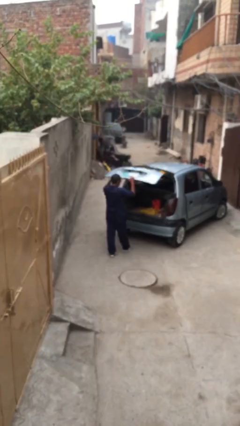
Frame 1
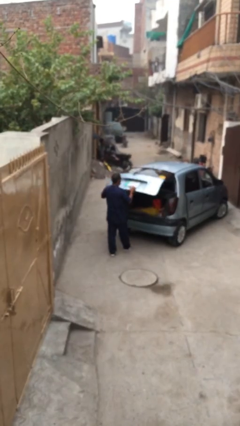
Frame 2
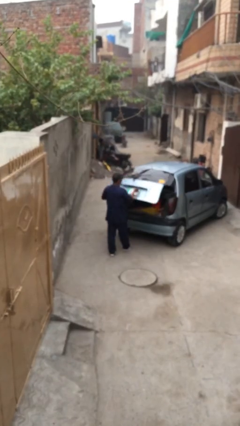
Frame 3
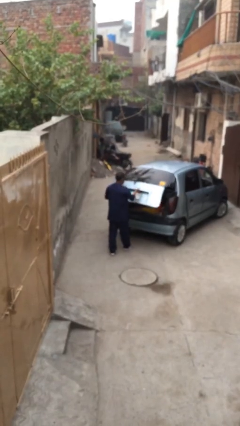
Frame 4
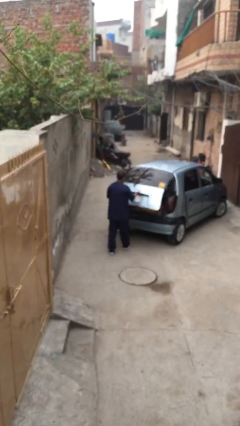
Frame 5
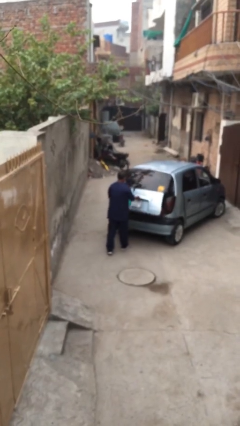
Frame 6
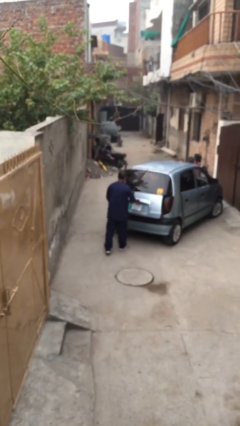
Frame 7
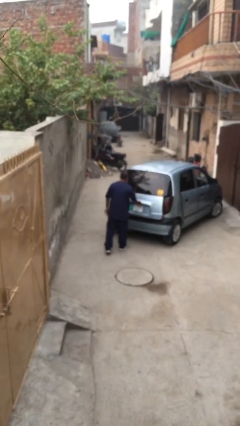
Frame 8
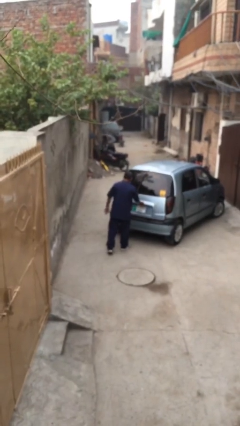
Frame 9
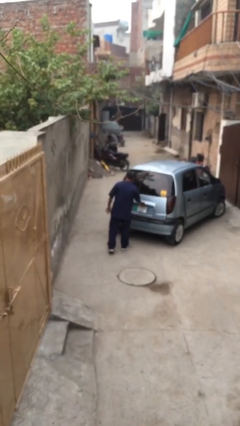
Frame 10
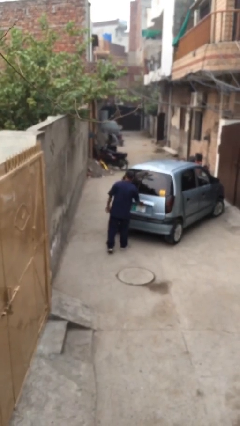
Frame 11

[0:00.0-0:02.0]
person closes car trunk

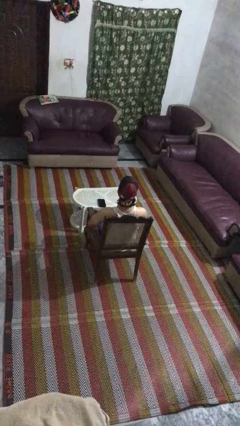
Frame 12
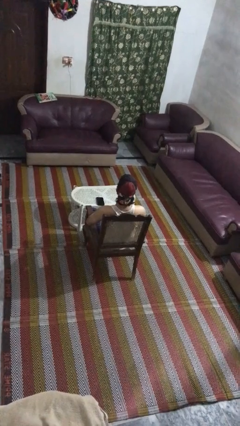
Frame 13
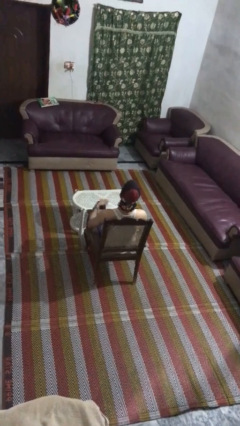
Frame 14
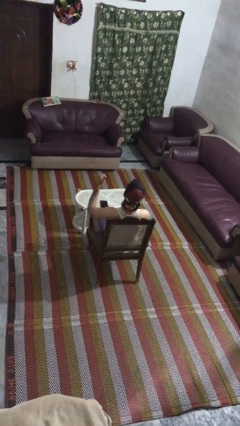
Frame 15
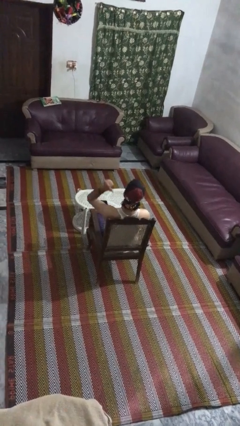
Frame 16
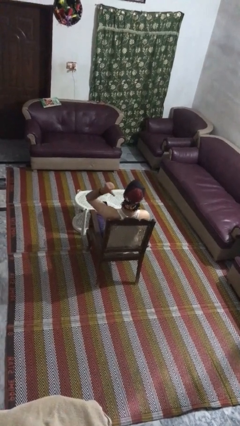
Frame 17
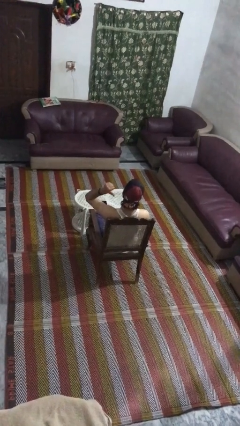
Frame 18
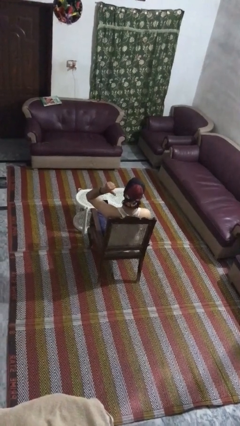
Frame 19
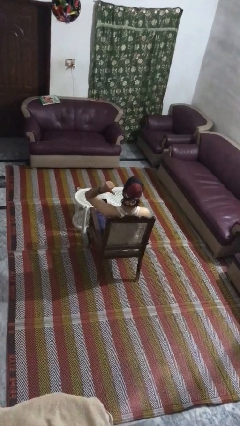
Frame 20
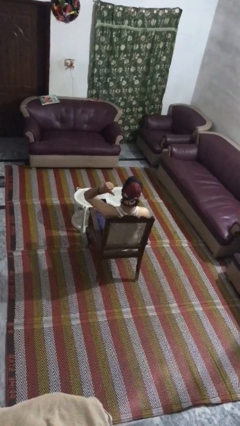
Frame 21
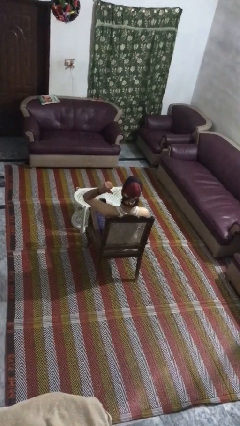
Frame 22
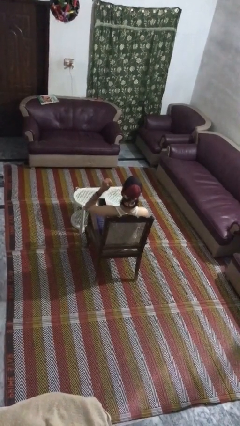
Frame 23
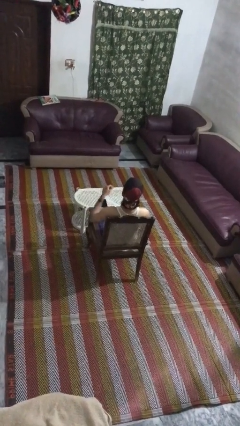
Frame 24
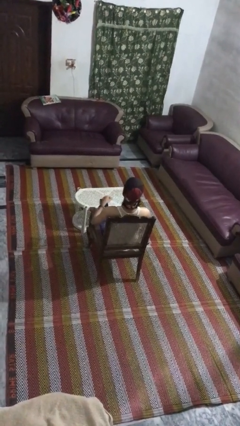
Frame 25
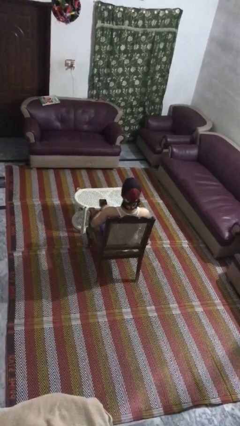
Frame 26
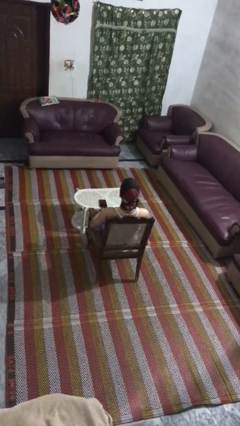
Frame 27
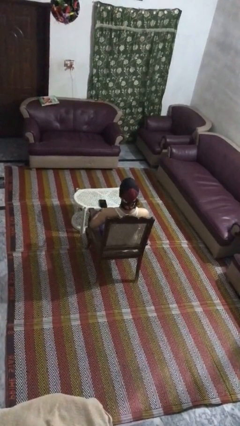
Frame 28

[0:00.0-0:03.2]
person gestures behind me

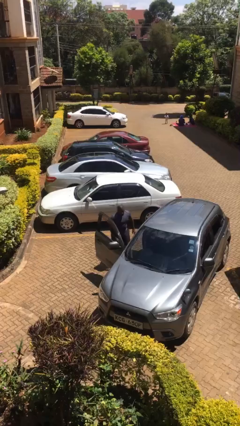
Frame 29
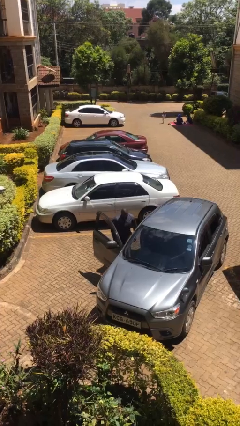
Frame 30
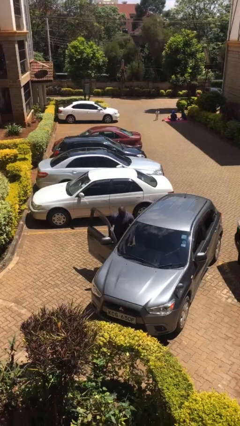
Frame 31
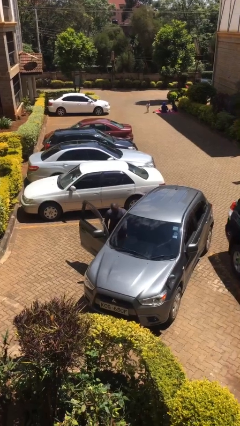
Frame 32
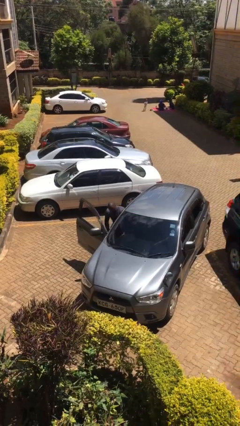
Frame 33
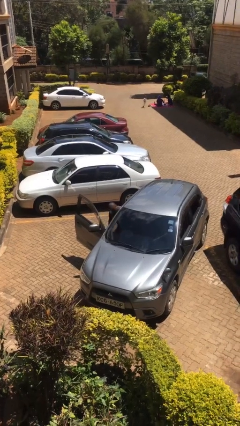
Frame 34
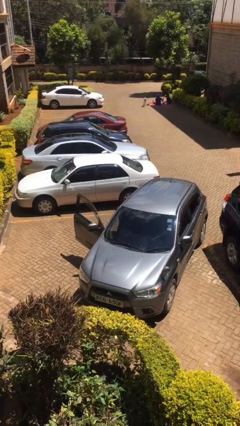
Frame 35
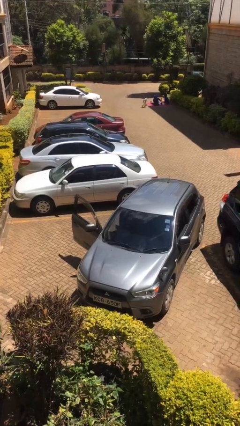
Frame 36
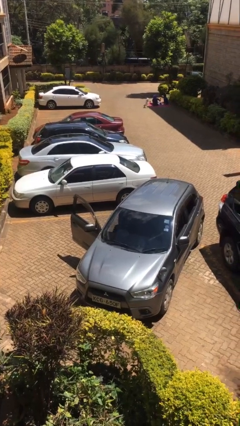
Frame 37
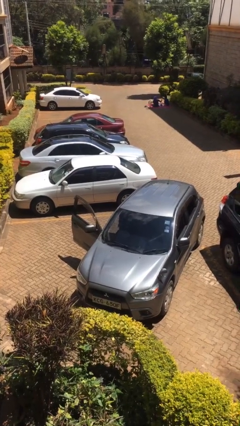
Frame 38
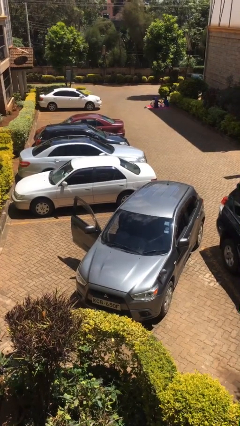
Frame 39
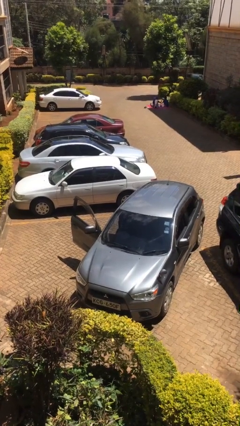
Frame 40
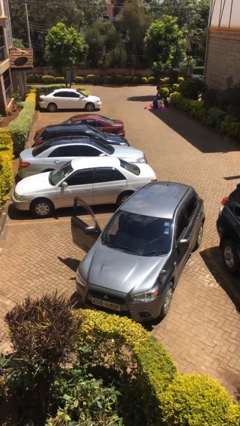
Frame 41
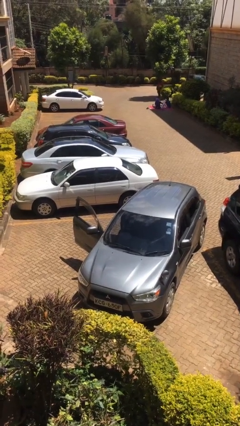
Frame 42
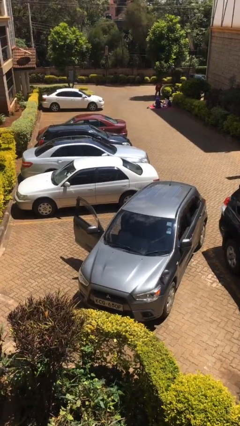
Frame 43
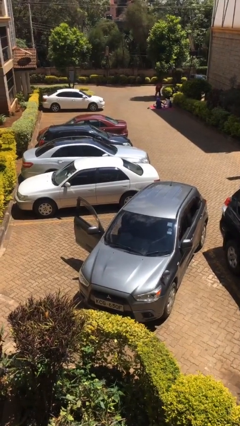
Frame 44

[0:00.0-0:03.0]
person enters car

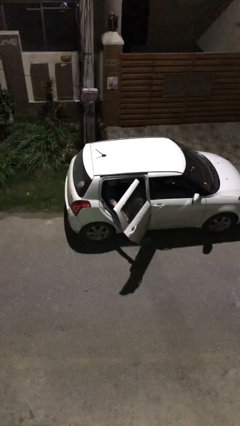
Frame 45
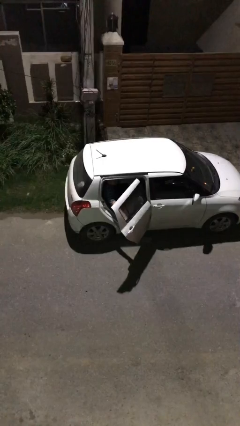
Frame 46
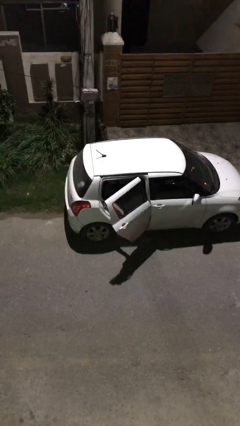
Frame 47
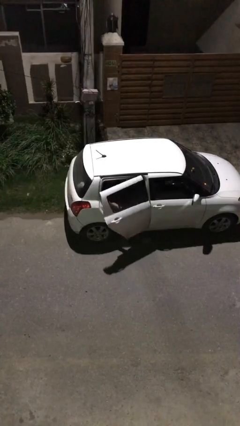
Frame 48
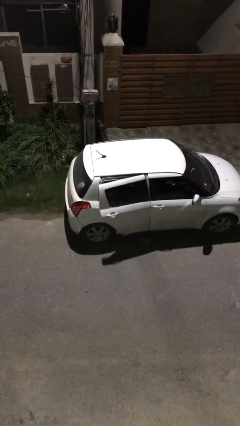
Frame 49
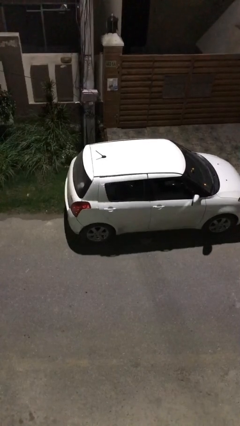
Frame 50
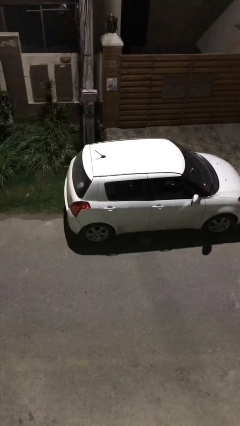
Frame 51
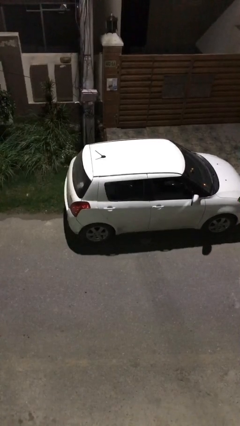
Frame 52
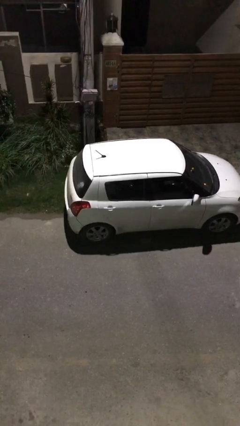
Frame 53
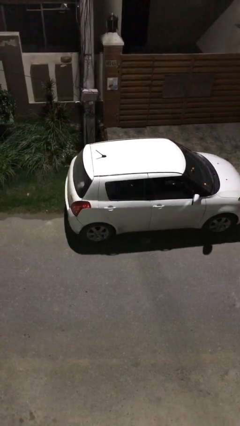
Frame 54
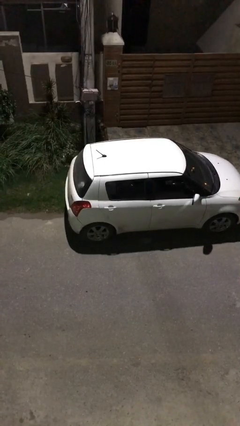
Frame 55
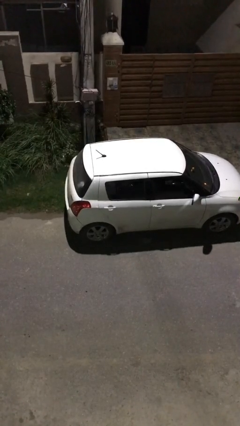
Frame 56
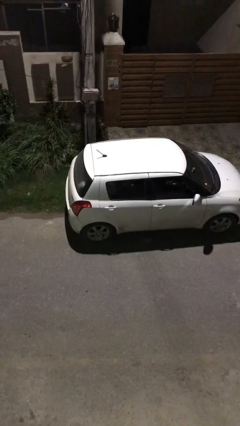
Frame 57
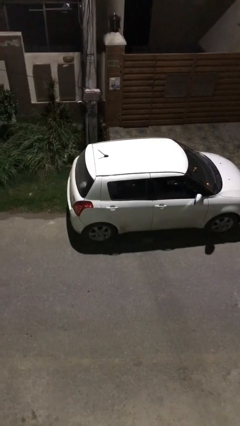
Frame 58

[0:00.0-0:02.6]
person closes car door

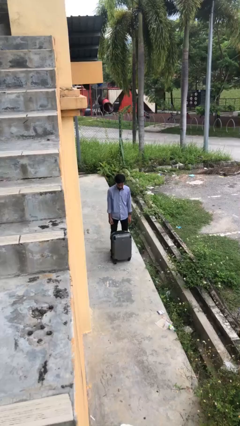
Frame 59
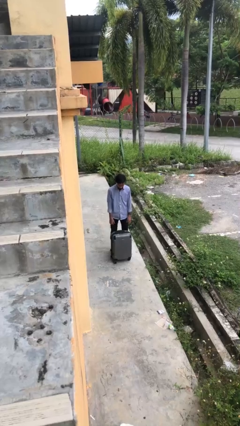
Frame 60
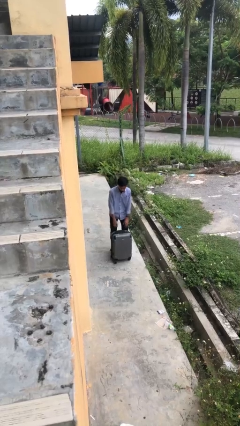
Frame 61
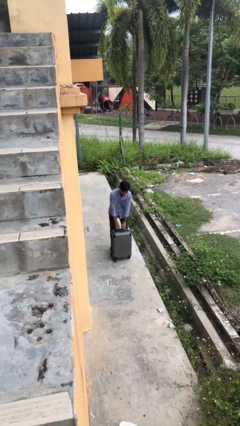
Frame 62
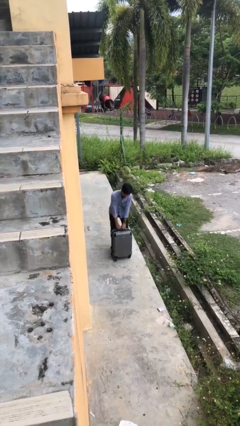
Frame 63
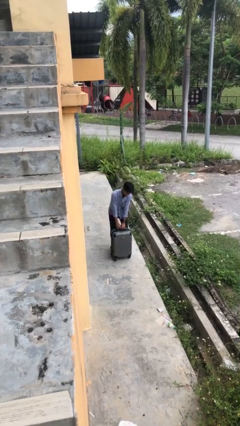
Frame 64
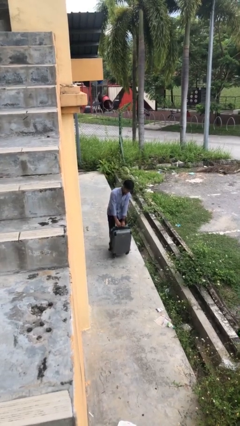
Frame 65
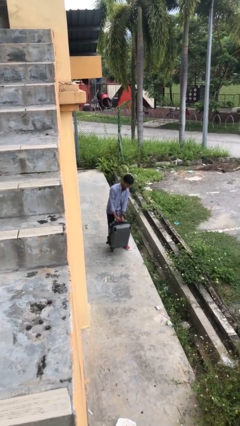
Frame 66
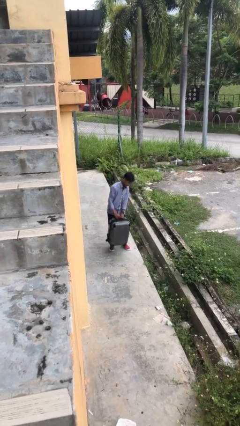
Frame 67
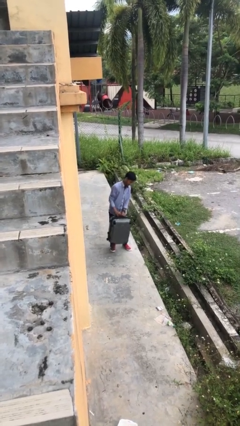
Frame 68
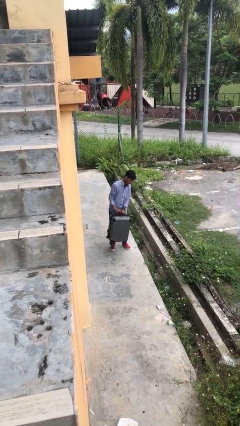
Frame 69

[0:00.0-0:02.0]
person picks up object from floor

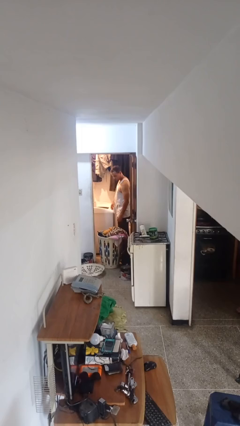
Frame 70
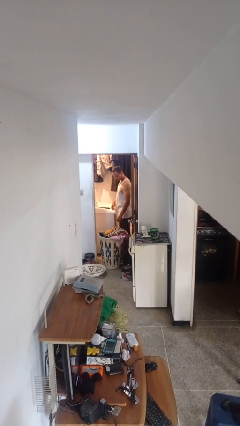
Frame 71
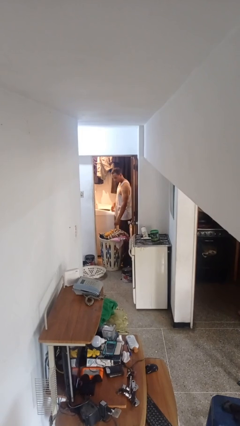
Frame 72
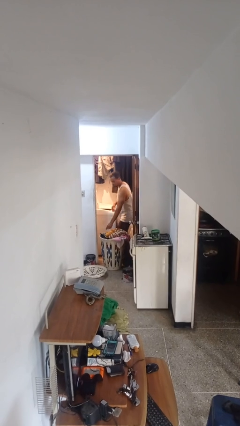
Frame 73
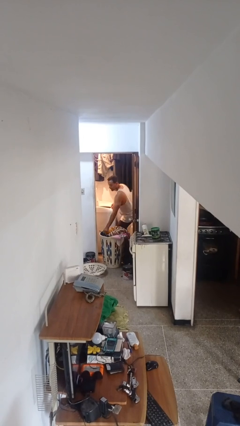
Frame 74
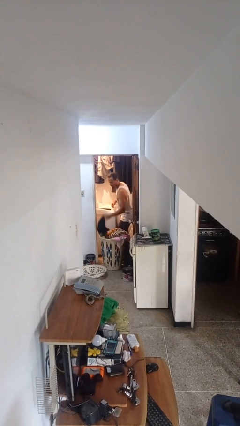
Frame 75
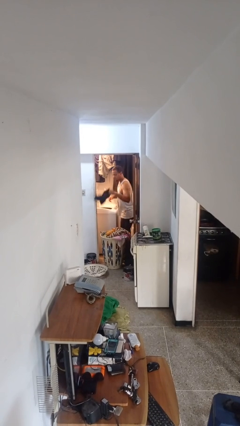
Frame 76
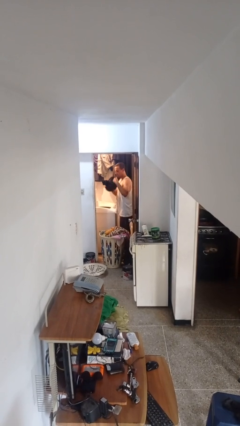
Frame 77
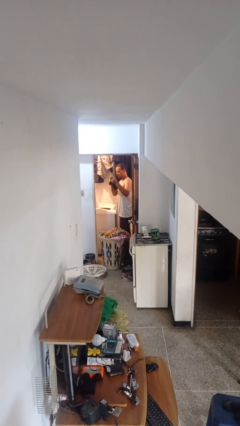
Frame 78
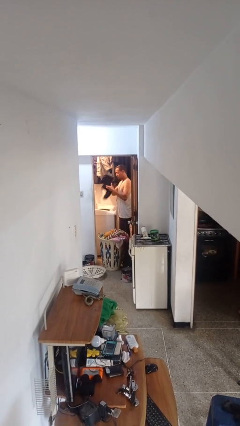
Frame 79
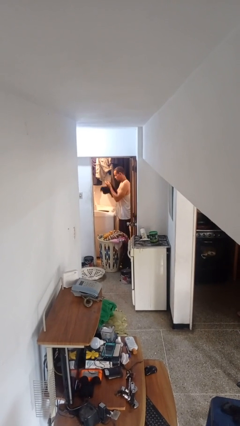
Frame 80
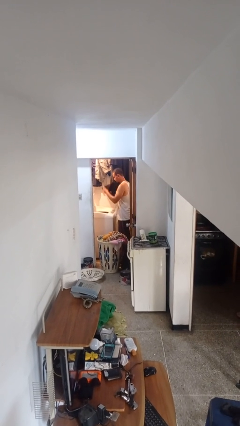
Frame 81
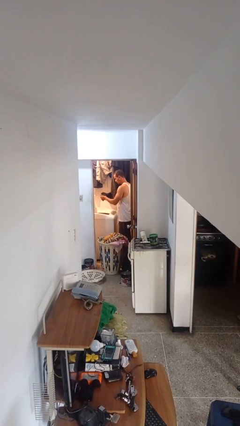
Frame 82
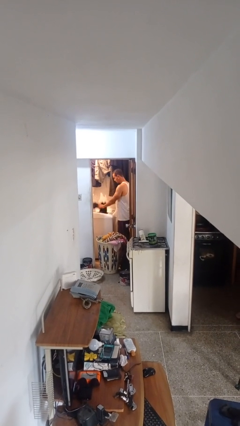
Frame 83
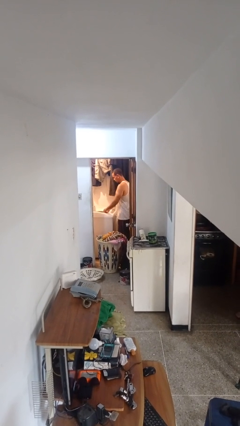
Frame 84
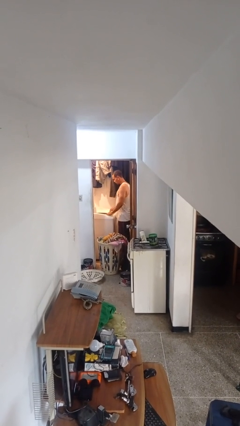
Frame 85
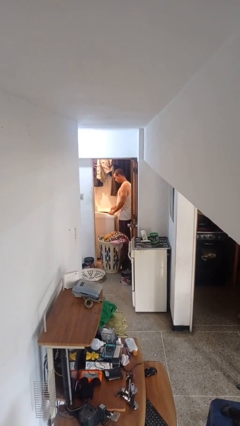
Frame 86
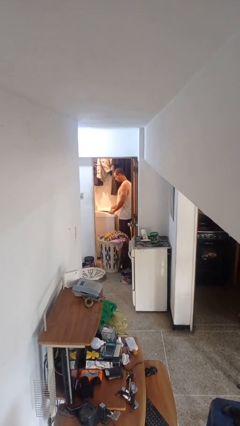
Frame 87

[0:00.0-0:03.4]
person loads clotheswasher

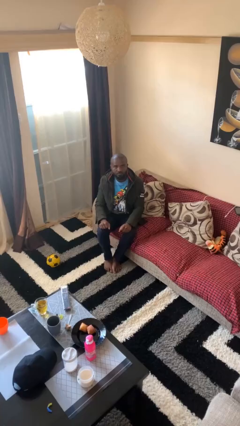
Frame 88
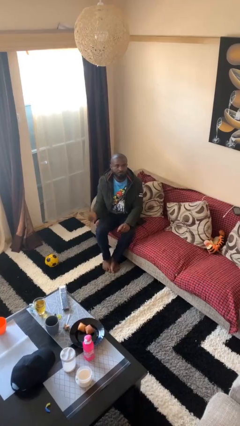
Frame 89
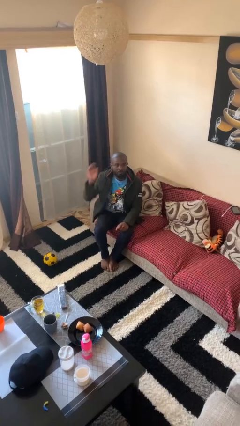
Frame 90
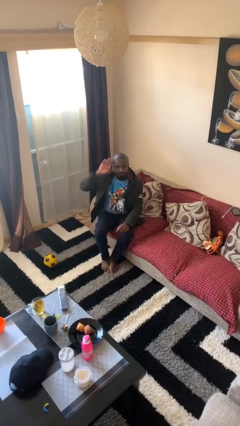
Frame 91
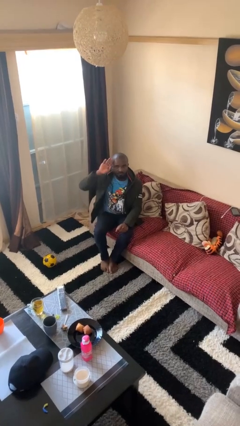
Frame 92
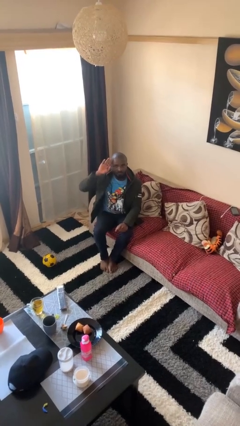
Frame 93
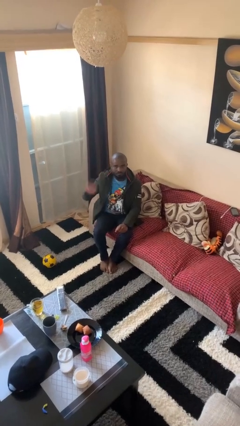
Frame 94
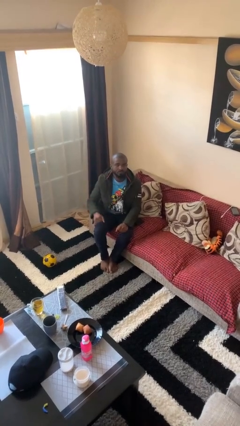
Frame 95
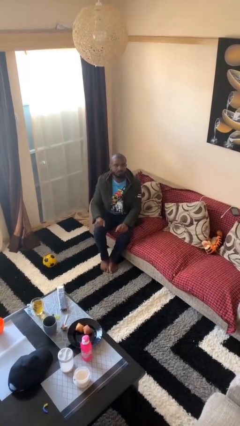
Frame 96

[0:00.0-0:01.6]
person salutes
